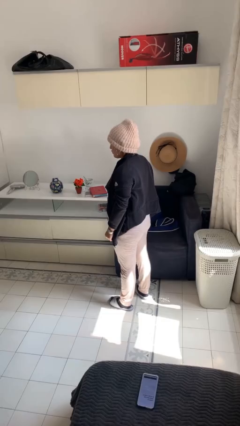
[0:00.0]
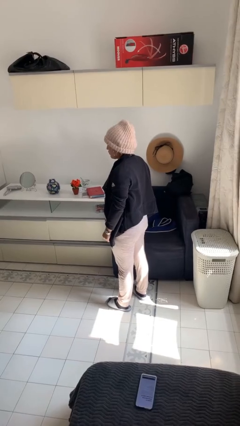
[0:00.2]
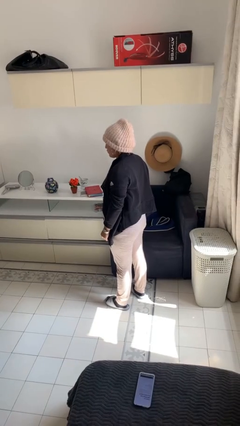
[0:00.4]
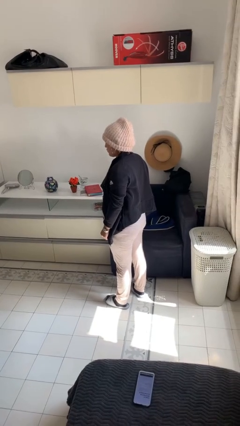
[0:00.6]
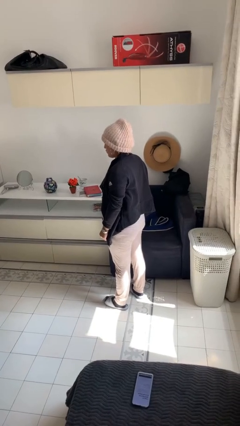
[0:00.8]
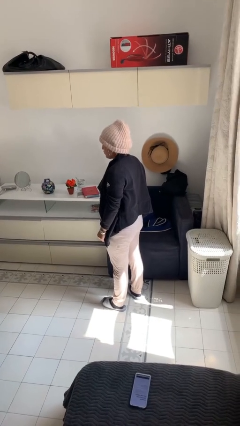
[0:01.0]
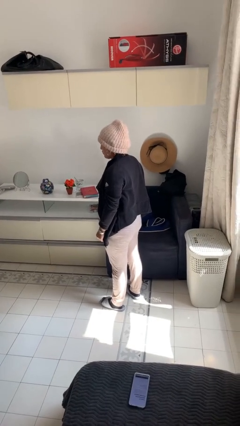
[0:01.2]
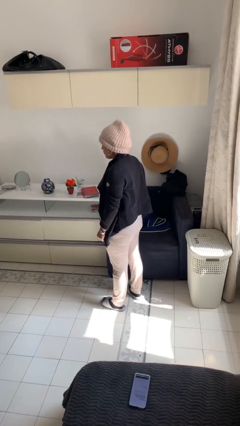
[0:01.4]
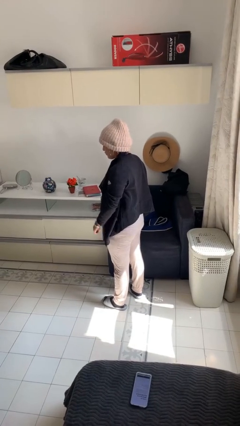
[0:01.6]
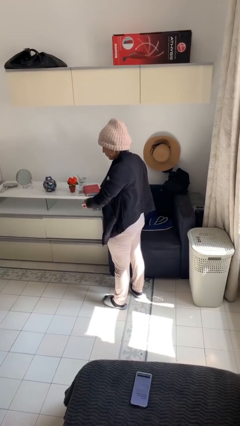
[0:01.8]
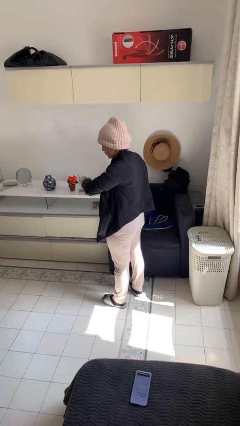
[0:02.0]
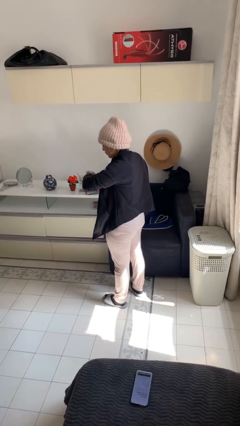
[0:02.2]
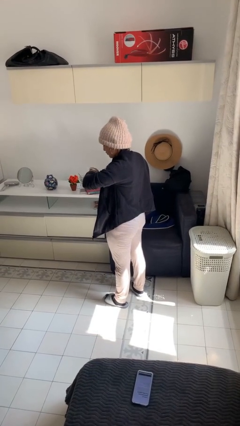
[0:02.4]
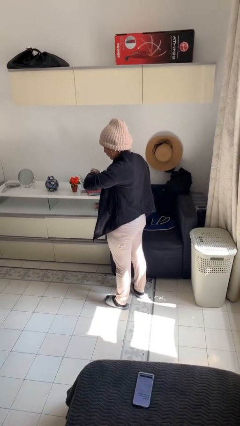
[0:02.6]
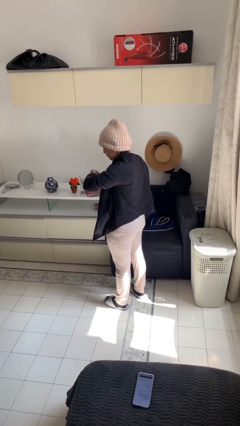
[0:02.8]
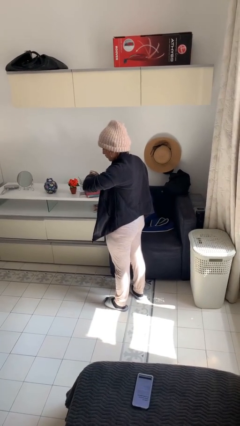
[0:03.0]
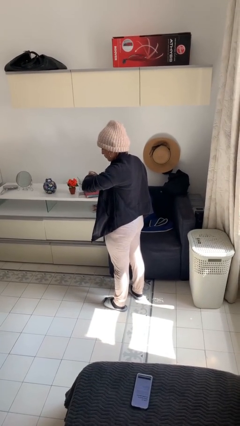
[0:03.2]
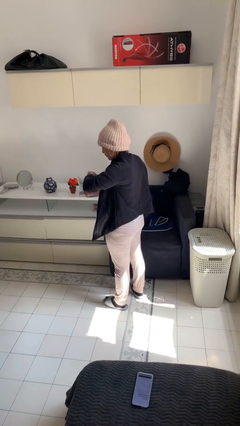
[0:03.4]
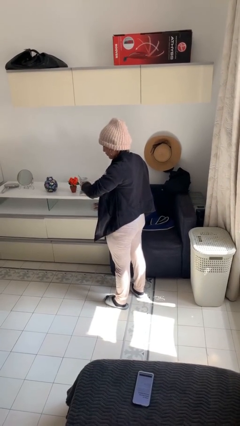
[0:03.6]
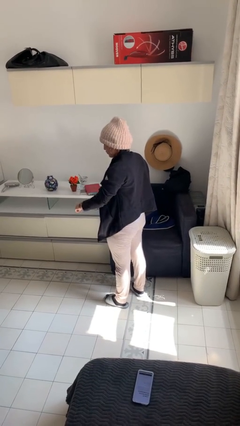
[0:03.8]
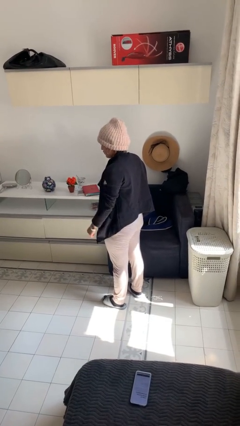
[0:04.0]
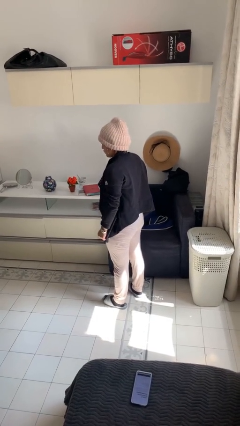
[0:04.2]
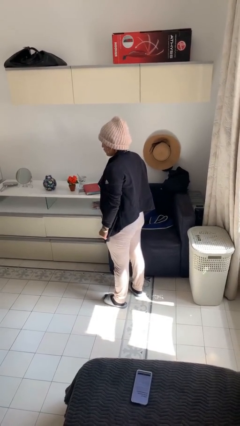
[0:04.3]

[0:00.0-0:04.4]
person looks at wristwatch

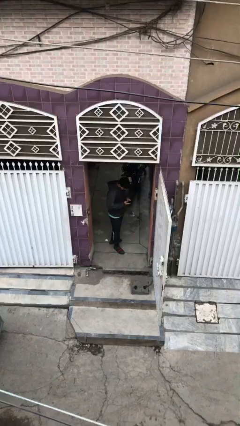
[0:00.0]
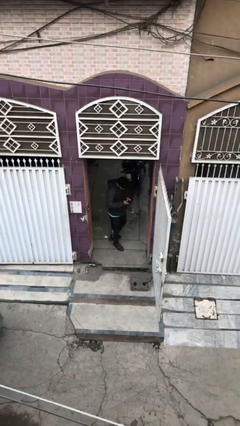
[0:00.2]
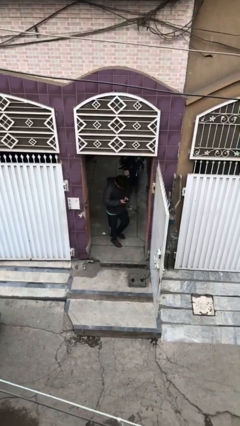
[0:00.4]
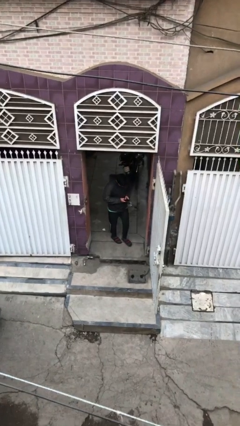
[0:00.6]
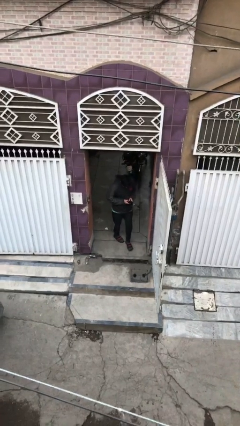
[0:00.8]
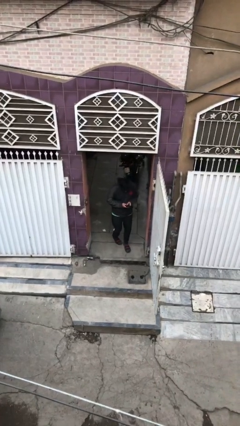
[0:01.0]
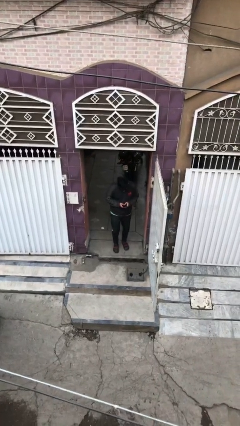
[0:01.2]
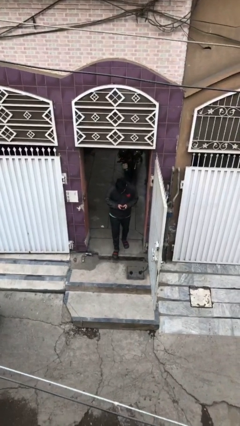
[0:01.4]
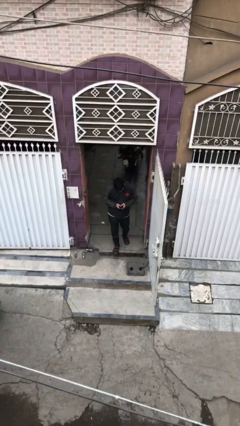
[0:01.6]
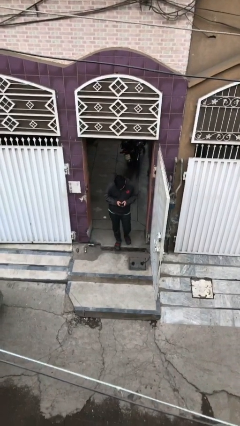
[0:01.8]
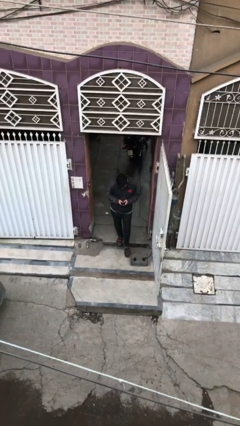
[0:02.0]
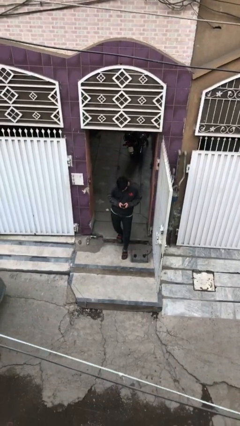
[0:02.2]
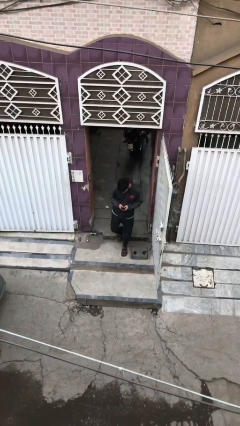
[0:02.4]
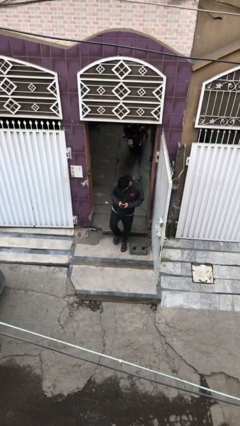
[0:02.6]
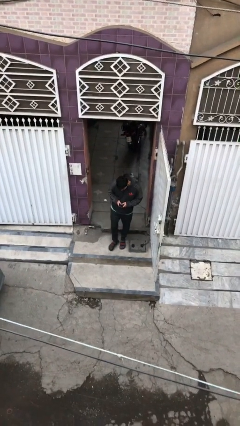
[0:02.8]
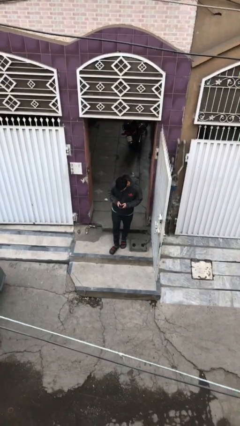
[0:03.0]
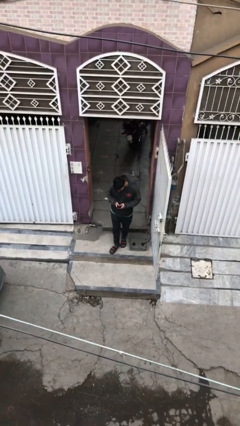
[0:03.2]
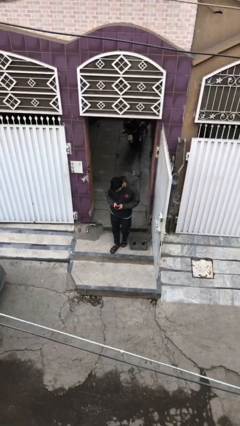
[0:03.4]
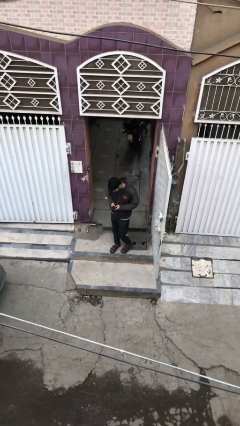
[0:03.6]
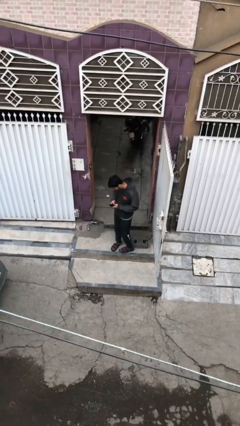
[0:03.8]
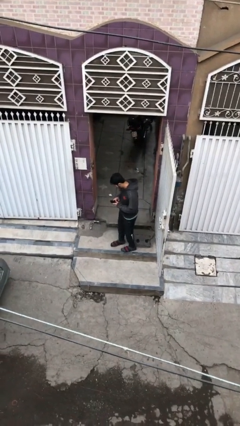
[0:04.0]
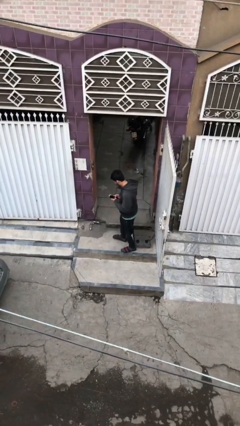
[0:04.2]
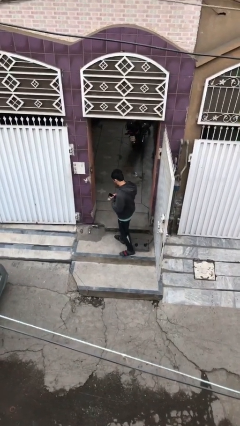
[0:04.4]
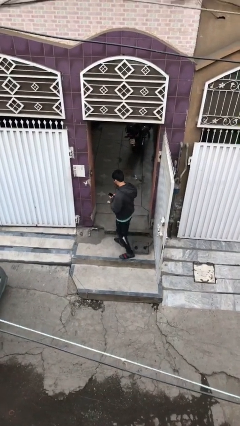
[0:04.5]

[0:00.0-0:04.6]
person enters scene through structure

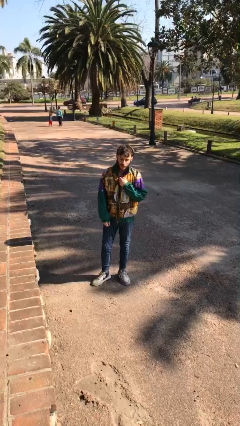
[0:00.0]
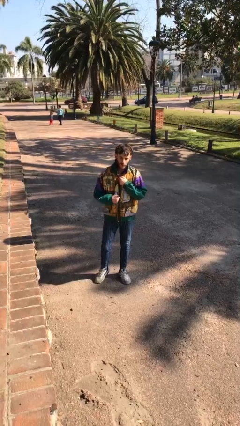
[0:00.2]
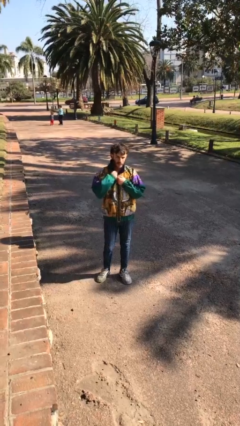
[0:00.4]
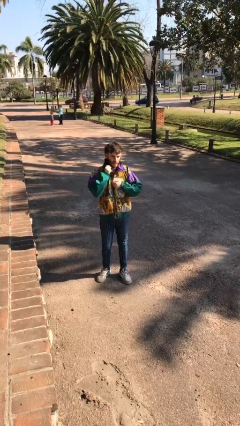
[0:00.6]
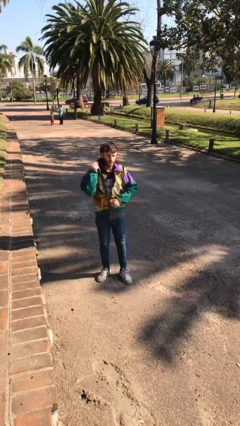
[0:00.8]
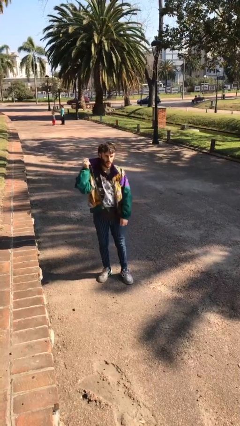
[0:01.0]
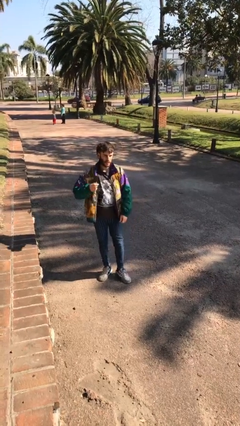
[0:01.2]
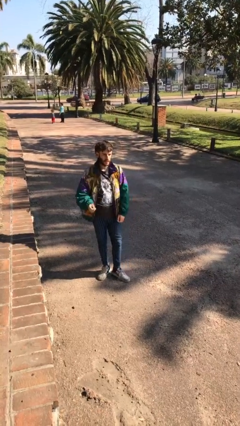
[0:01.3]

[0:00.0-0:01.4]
person unzips jacket

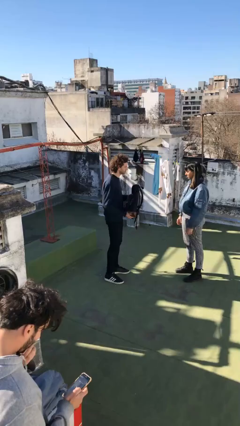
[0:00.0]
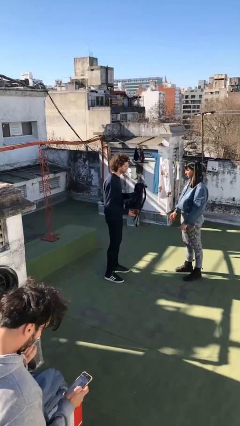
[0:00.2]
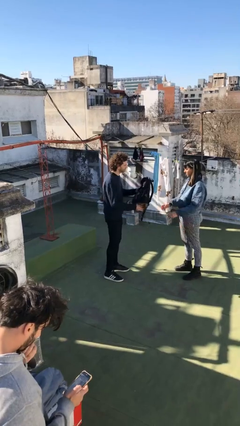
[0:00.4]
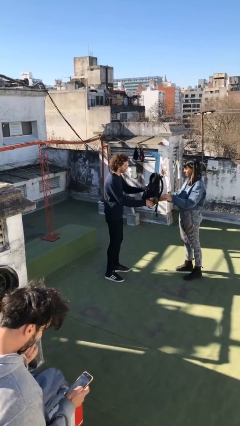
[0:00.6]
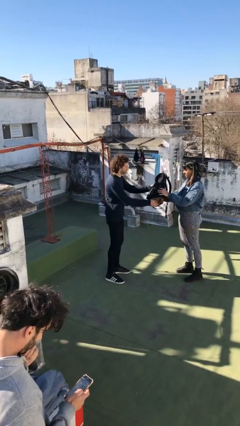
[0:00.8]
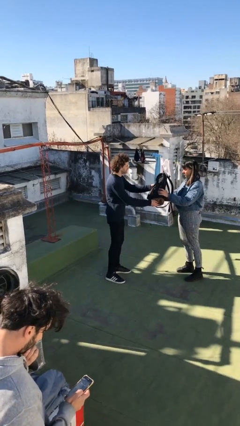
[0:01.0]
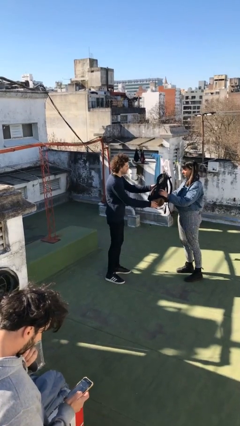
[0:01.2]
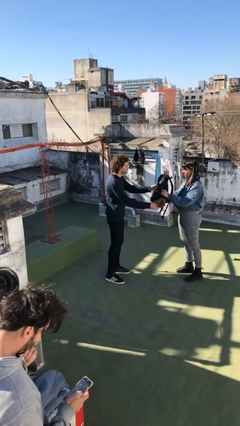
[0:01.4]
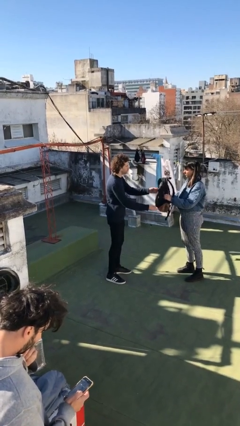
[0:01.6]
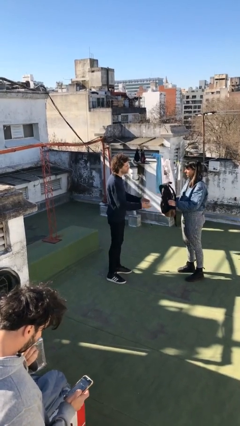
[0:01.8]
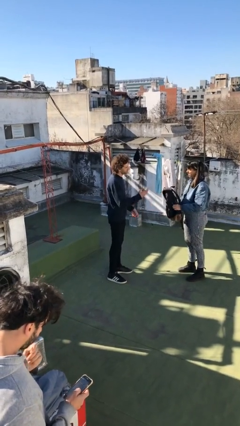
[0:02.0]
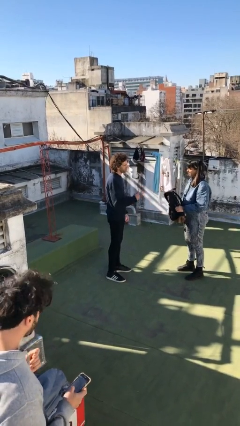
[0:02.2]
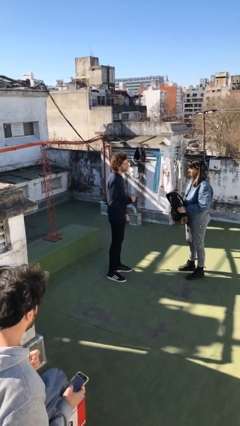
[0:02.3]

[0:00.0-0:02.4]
person transfers object to person

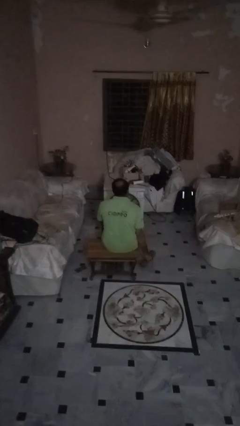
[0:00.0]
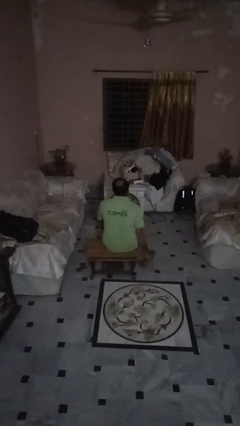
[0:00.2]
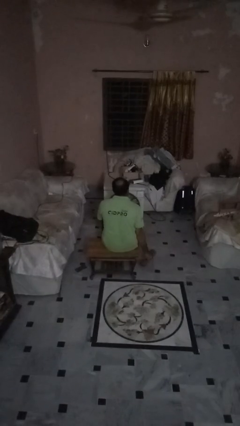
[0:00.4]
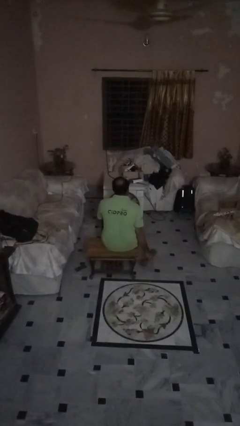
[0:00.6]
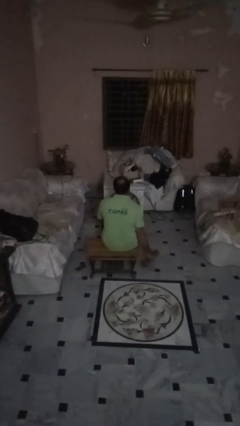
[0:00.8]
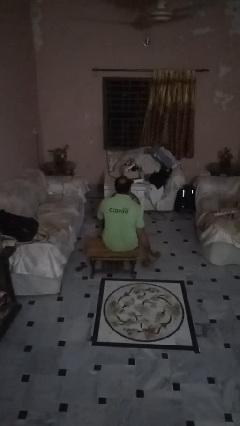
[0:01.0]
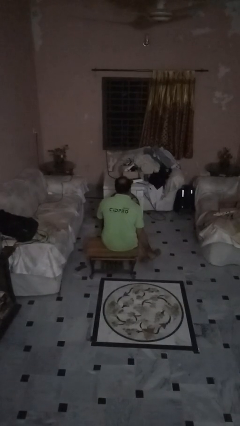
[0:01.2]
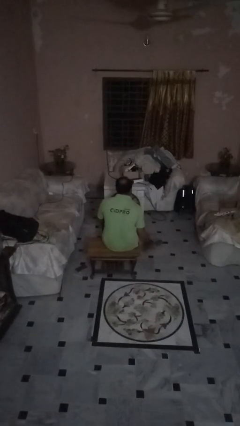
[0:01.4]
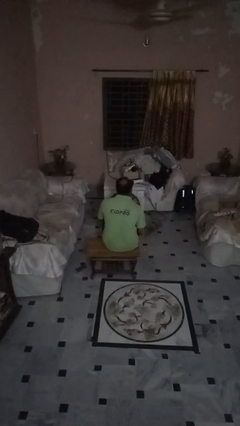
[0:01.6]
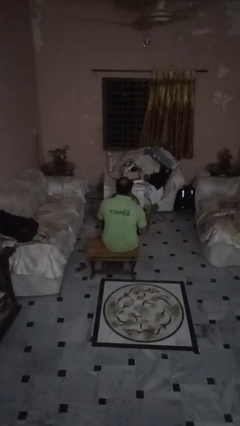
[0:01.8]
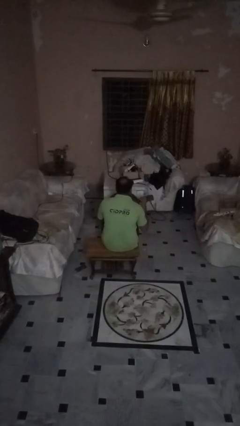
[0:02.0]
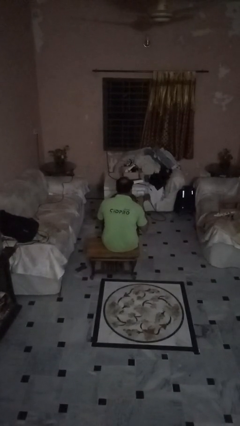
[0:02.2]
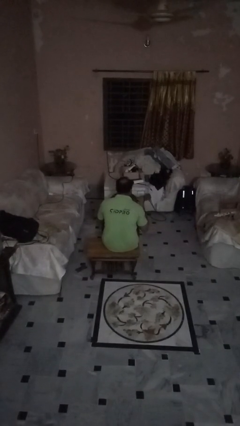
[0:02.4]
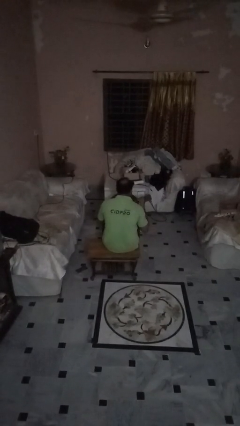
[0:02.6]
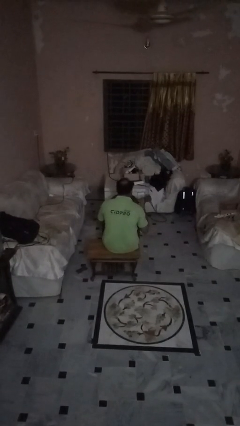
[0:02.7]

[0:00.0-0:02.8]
person lifts dumbbells

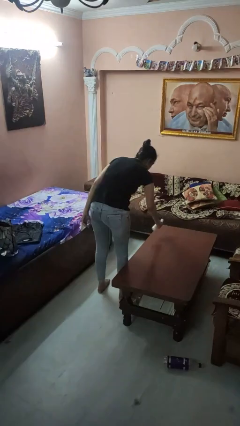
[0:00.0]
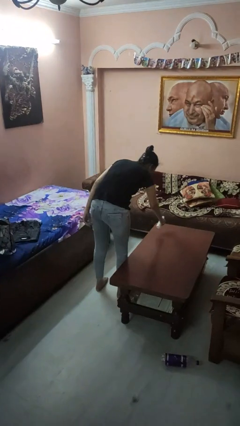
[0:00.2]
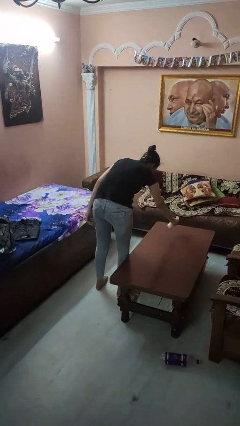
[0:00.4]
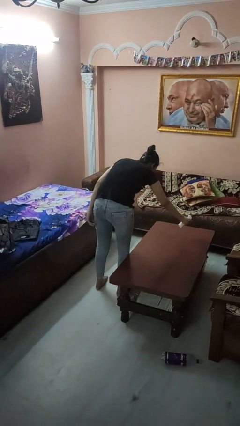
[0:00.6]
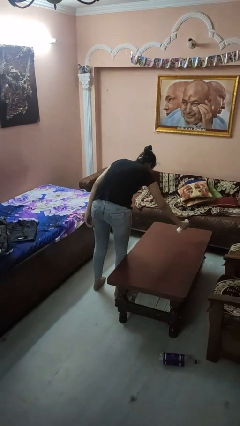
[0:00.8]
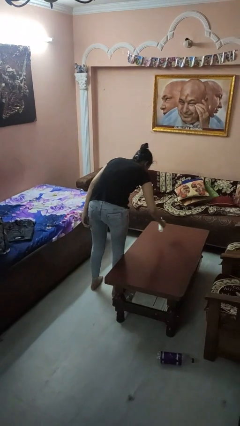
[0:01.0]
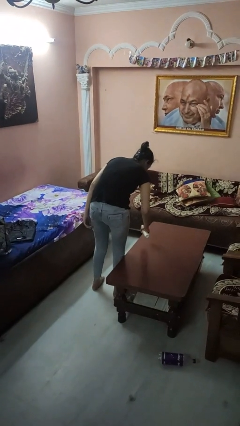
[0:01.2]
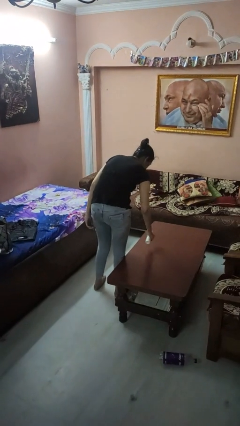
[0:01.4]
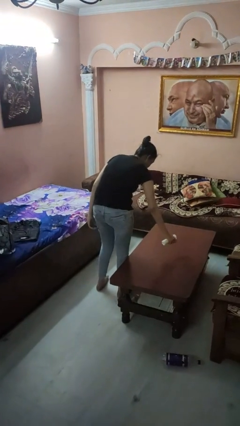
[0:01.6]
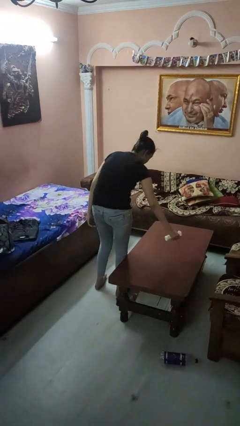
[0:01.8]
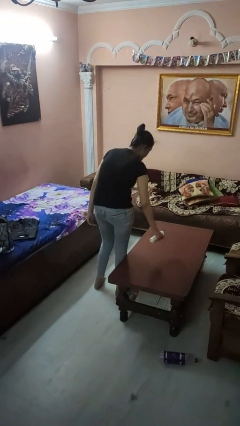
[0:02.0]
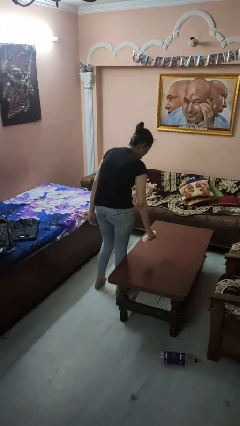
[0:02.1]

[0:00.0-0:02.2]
person sprays from bottle
